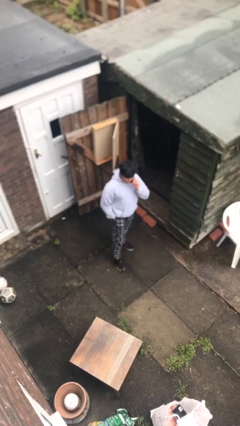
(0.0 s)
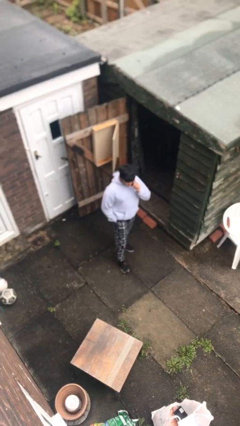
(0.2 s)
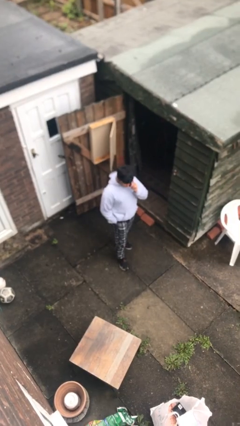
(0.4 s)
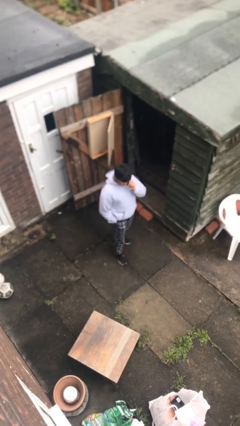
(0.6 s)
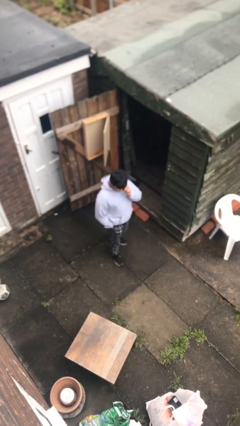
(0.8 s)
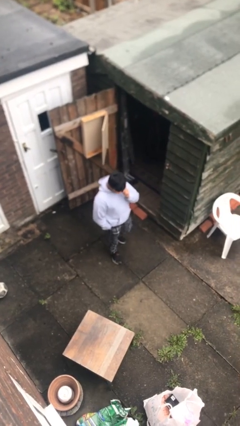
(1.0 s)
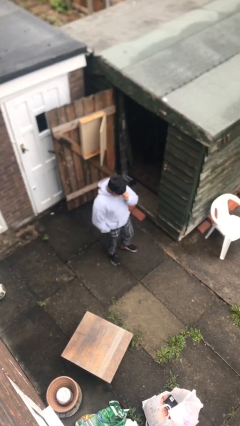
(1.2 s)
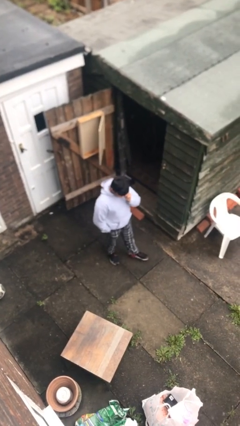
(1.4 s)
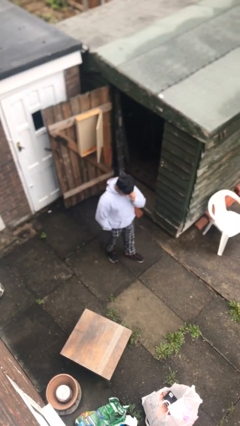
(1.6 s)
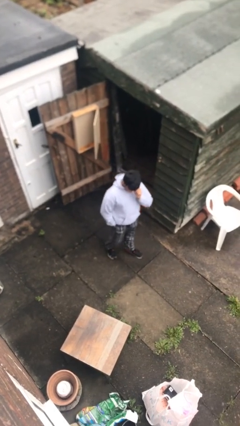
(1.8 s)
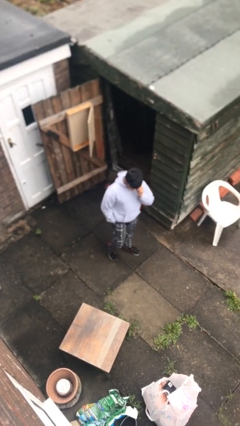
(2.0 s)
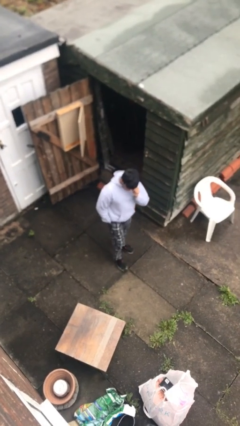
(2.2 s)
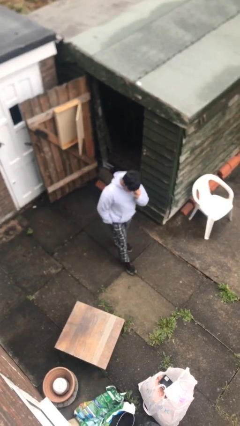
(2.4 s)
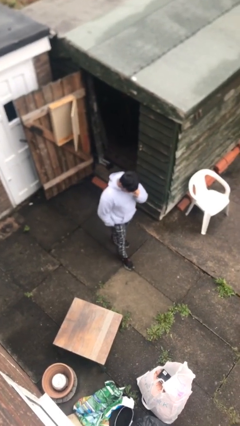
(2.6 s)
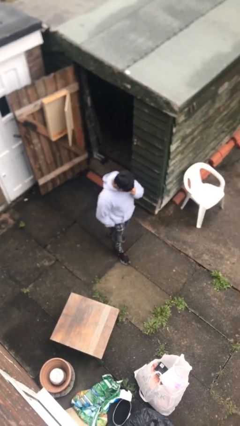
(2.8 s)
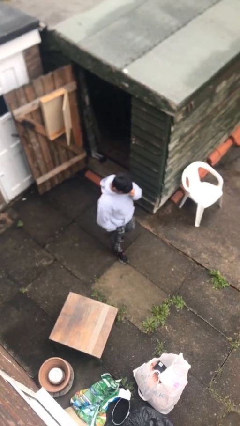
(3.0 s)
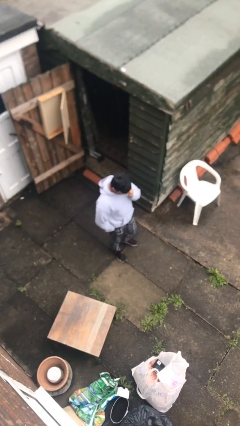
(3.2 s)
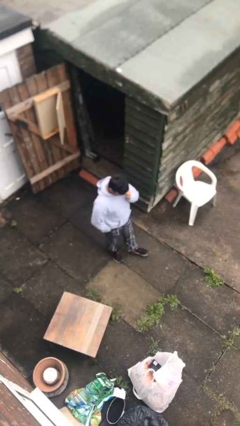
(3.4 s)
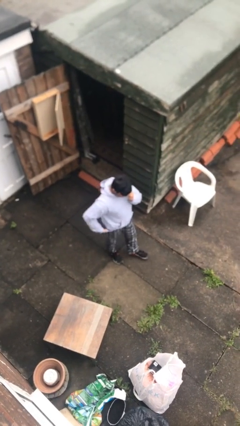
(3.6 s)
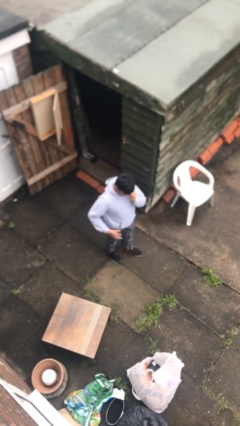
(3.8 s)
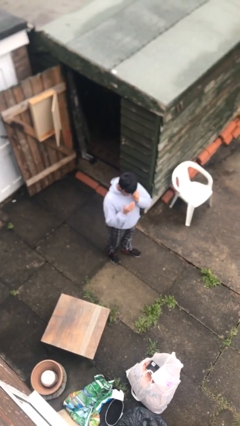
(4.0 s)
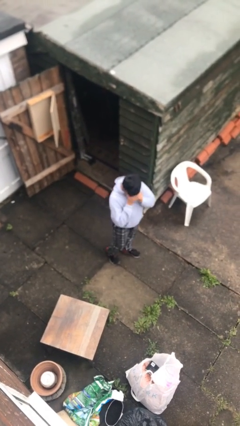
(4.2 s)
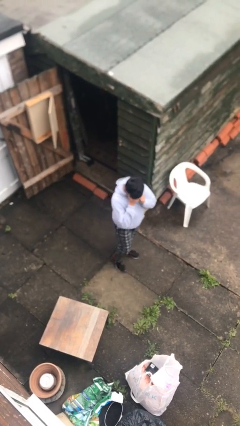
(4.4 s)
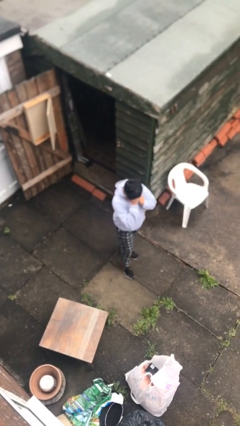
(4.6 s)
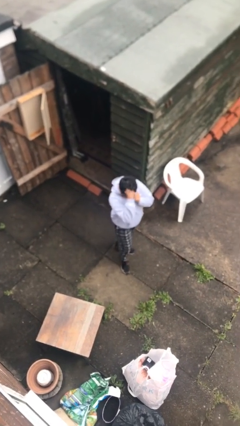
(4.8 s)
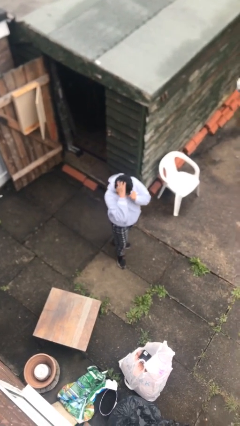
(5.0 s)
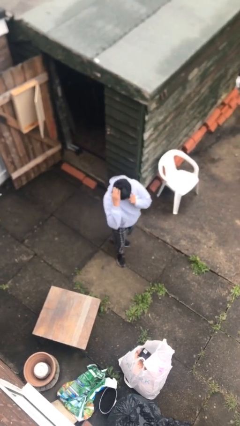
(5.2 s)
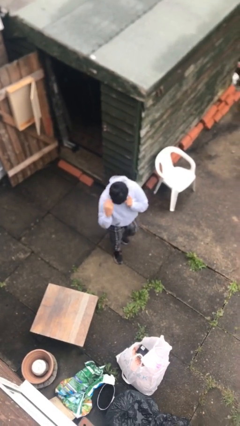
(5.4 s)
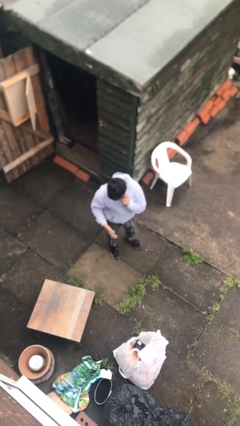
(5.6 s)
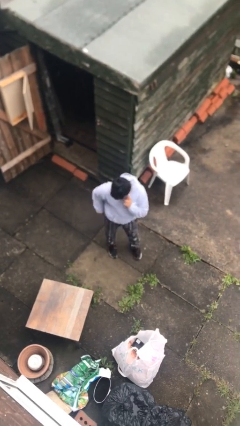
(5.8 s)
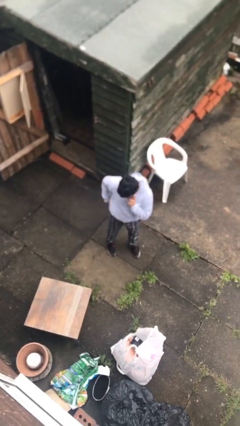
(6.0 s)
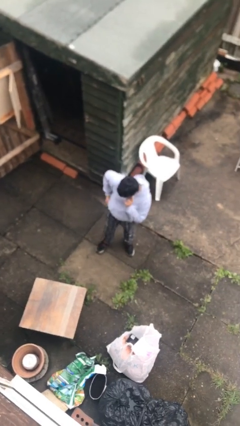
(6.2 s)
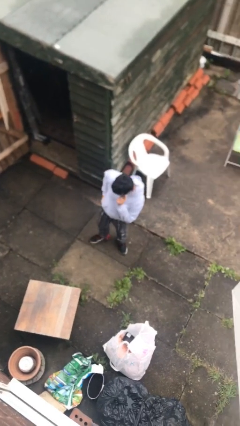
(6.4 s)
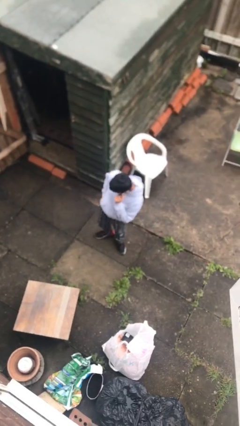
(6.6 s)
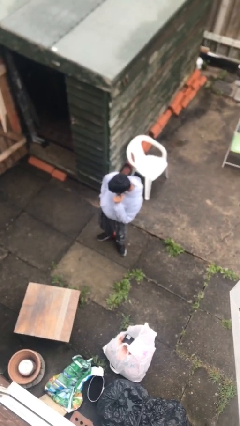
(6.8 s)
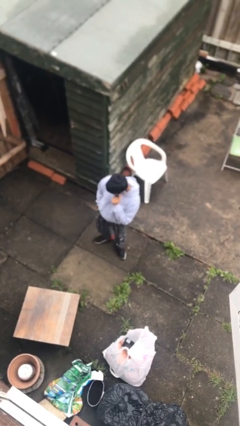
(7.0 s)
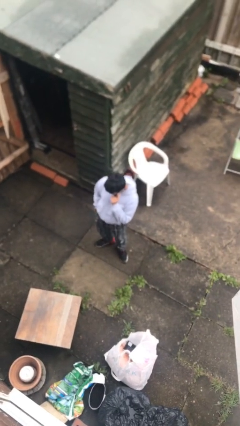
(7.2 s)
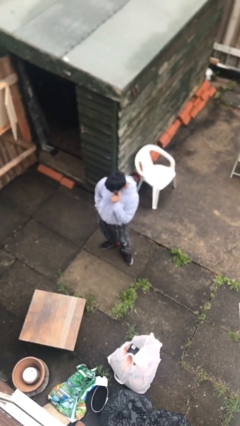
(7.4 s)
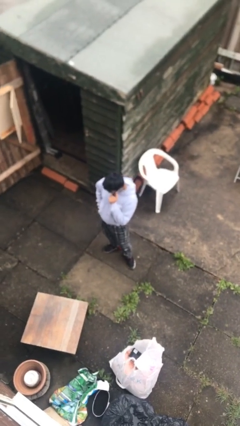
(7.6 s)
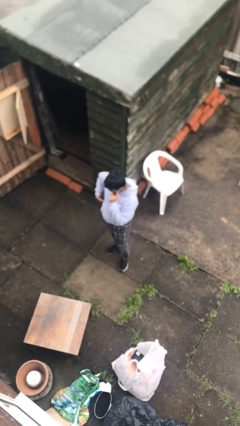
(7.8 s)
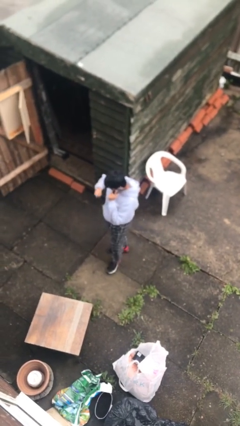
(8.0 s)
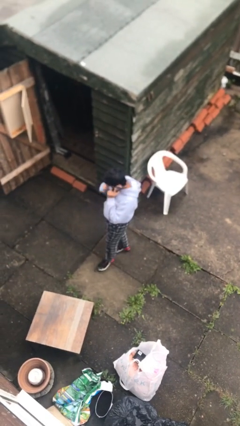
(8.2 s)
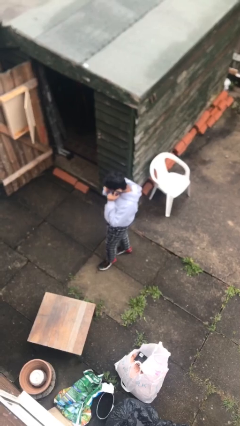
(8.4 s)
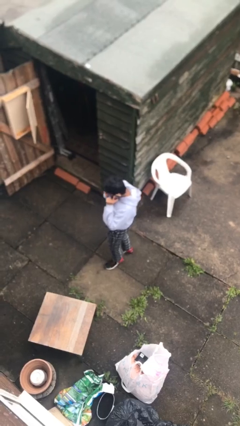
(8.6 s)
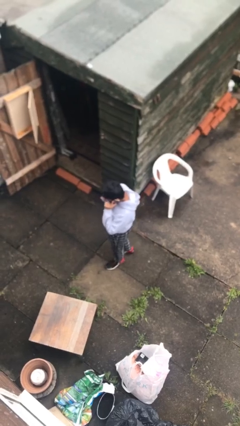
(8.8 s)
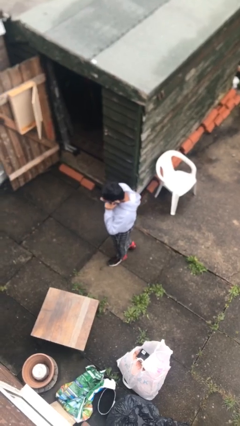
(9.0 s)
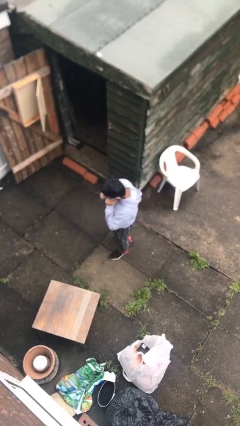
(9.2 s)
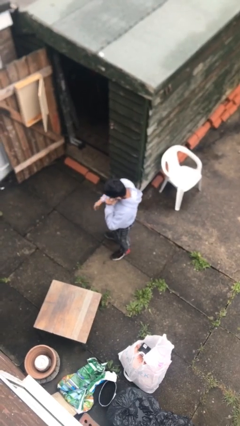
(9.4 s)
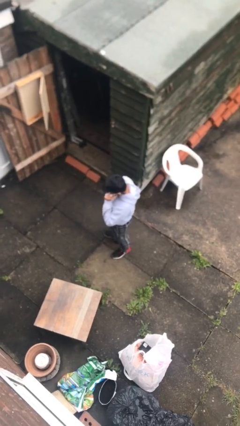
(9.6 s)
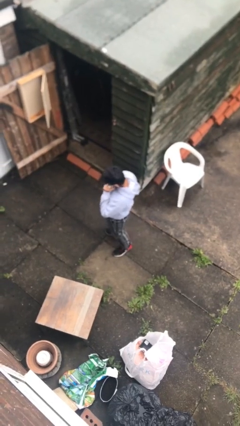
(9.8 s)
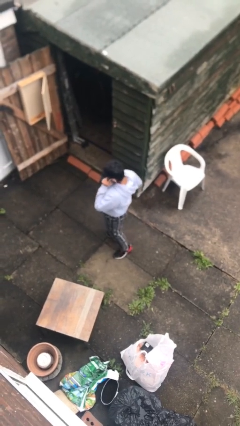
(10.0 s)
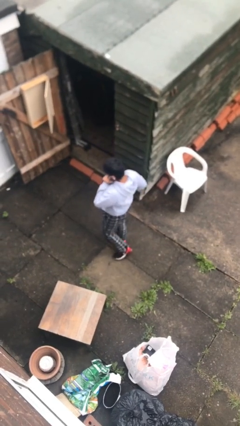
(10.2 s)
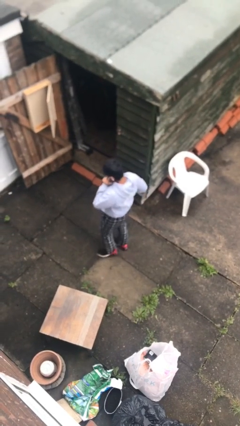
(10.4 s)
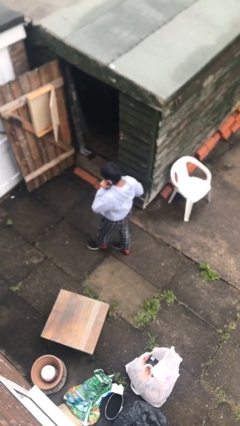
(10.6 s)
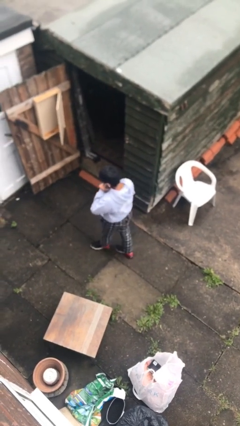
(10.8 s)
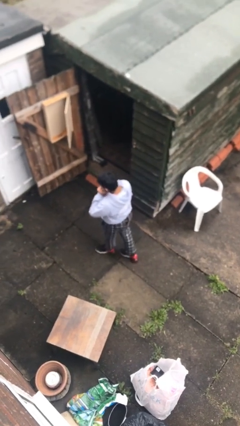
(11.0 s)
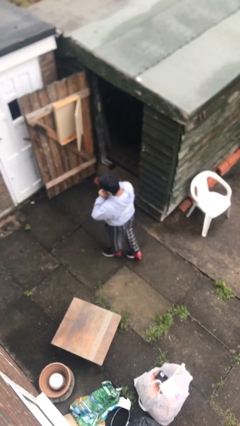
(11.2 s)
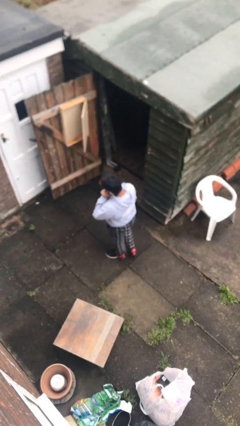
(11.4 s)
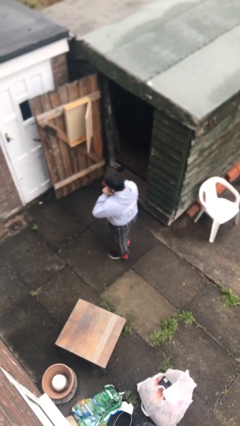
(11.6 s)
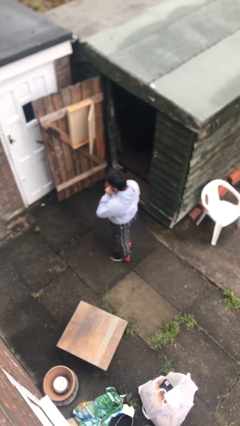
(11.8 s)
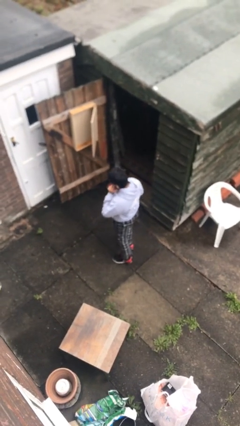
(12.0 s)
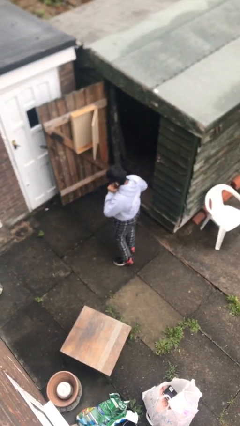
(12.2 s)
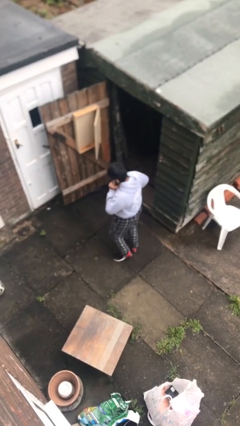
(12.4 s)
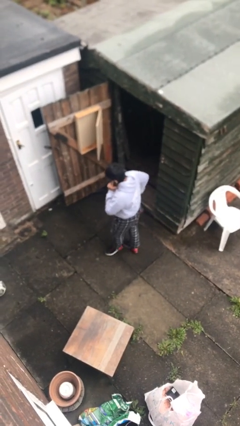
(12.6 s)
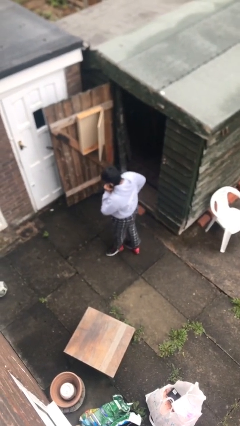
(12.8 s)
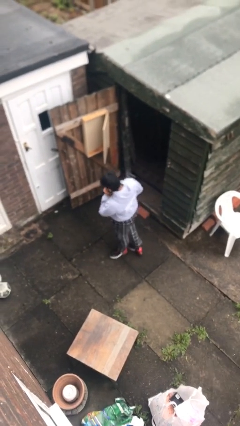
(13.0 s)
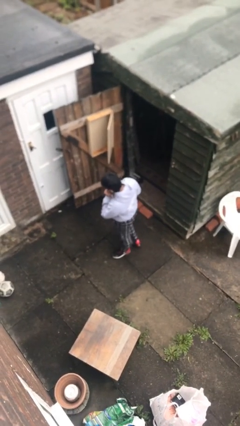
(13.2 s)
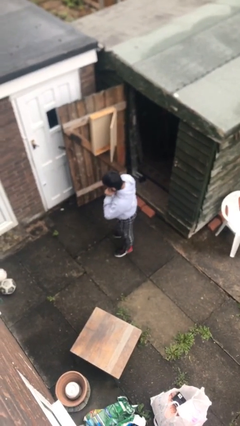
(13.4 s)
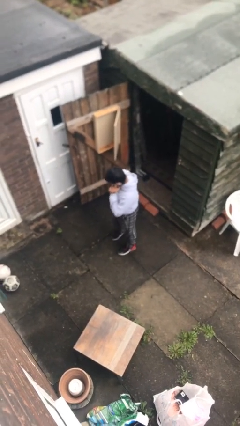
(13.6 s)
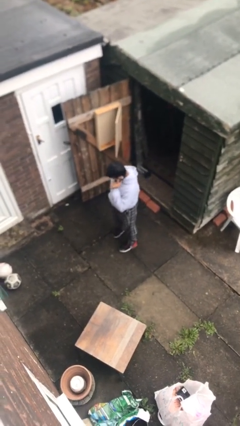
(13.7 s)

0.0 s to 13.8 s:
person talks on phone

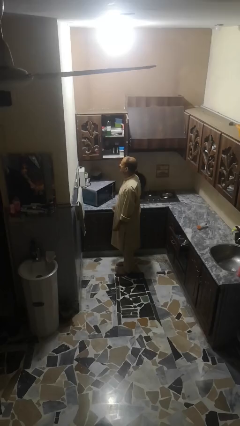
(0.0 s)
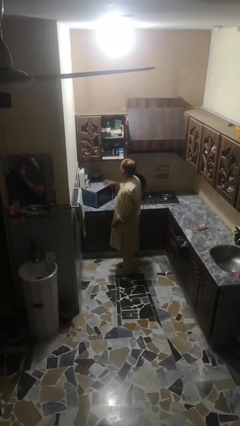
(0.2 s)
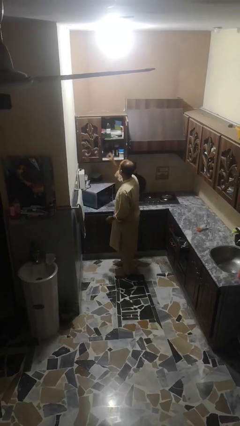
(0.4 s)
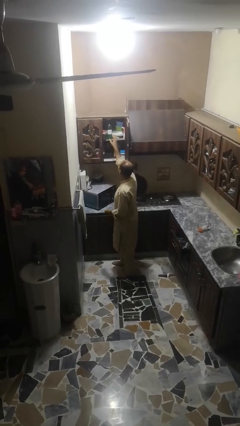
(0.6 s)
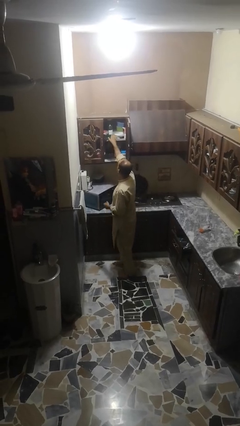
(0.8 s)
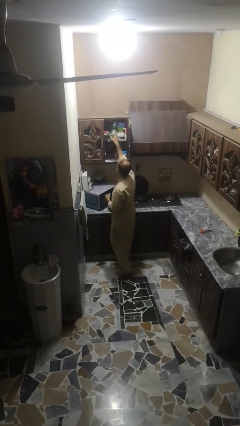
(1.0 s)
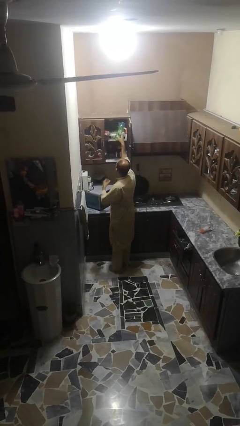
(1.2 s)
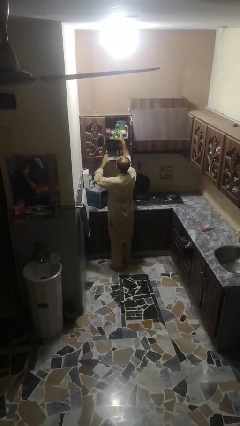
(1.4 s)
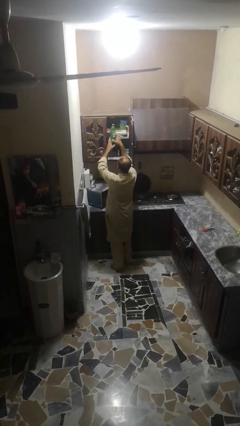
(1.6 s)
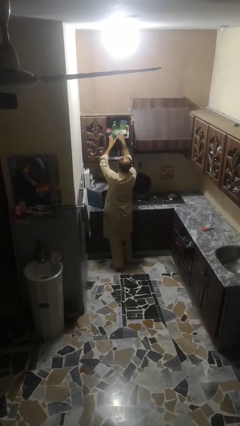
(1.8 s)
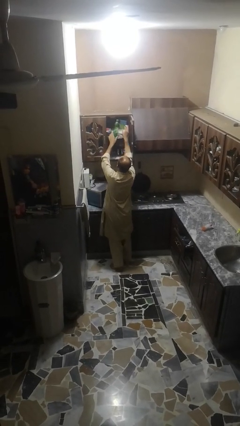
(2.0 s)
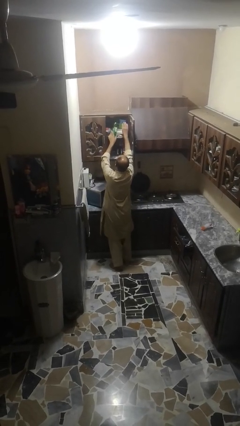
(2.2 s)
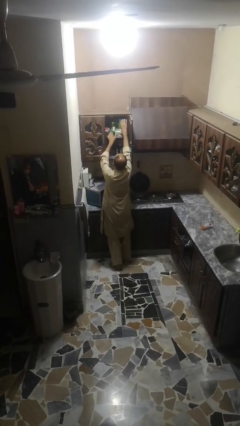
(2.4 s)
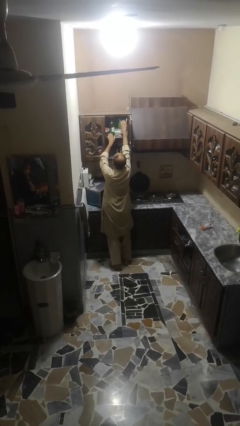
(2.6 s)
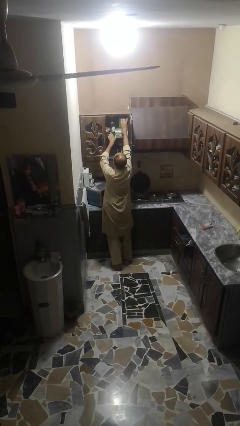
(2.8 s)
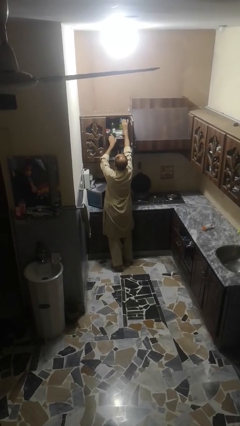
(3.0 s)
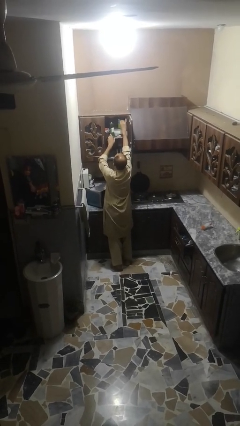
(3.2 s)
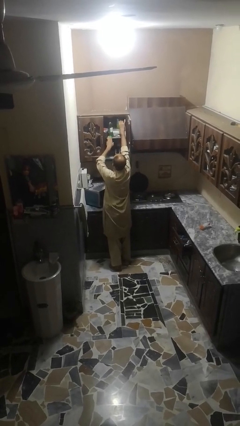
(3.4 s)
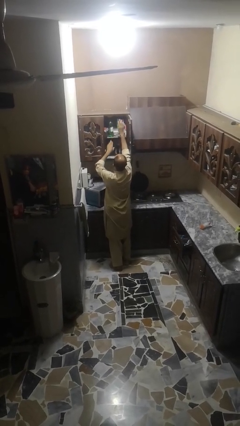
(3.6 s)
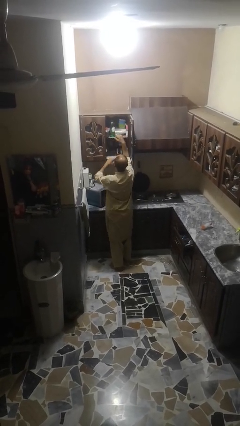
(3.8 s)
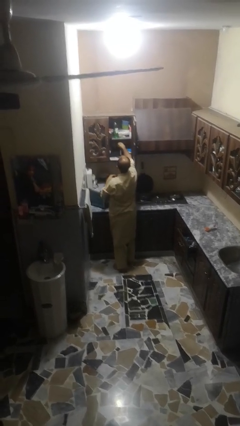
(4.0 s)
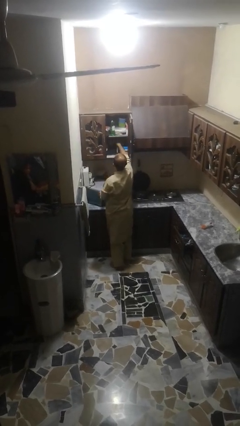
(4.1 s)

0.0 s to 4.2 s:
person searches in cabinet
